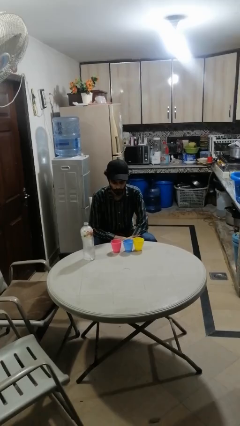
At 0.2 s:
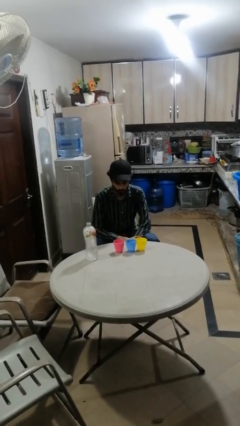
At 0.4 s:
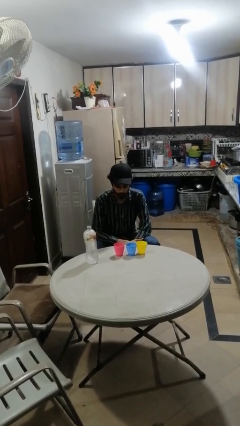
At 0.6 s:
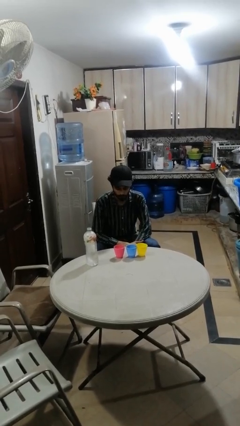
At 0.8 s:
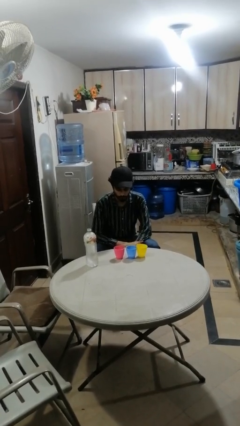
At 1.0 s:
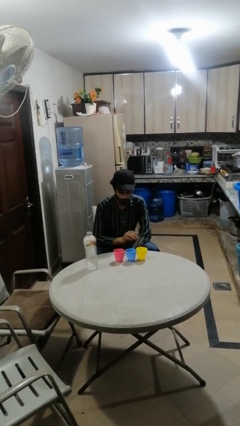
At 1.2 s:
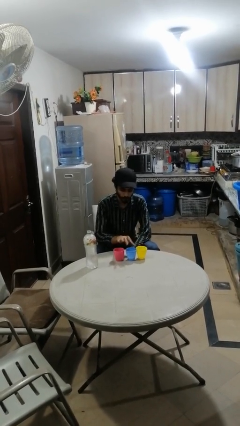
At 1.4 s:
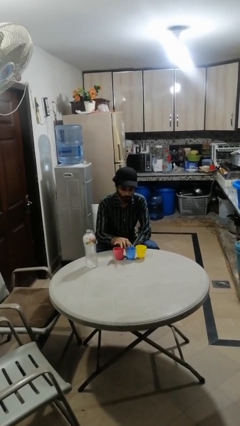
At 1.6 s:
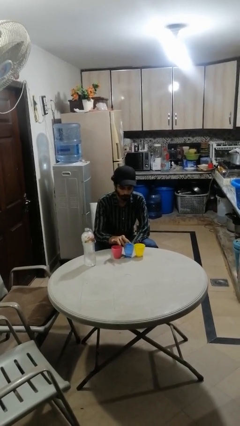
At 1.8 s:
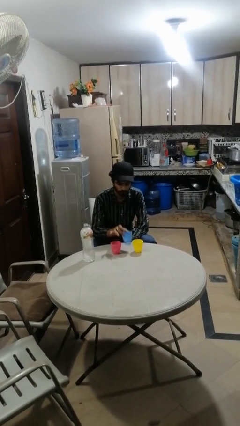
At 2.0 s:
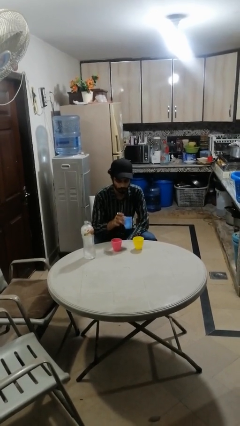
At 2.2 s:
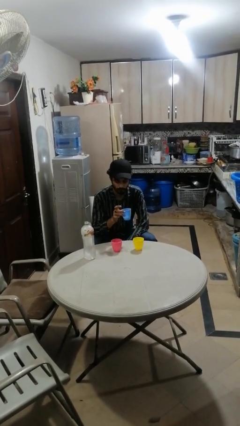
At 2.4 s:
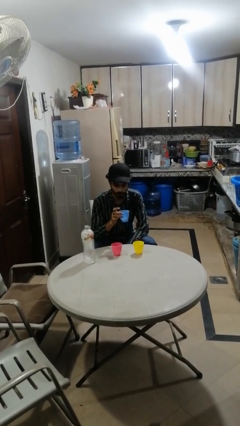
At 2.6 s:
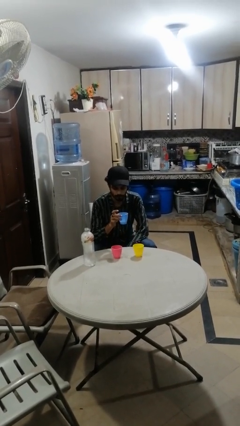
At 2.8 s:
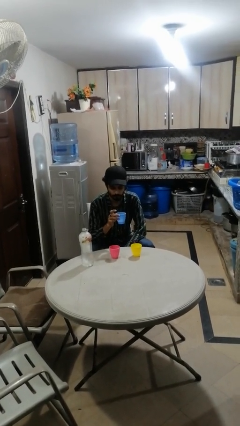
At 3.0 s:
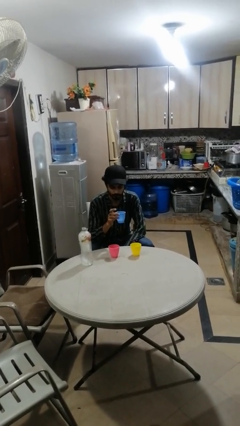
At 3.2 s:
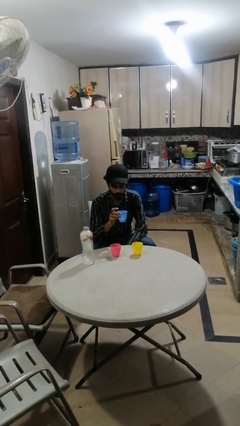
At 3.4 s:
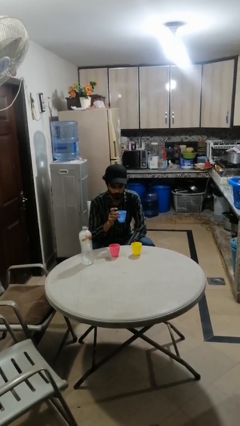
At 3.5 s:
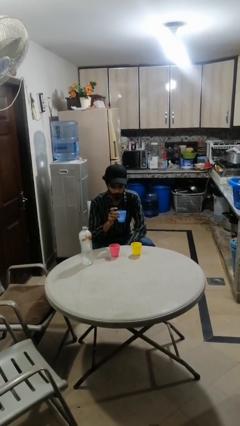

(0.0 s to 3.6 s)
person picks up object from table

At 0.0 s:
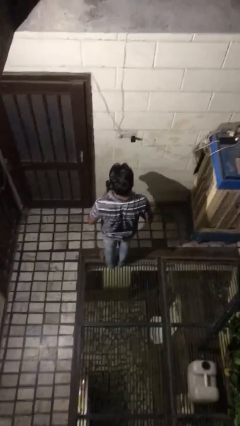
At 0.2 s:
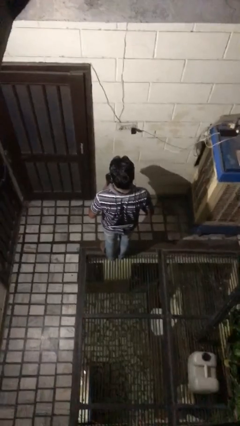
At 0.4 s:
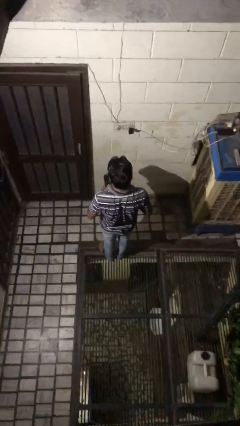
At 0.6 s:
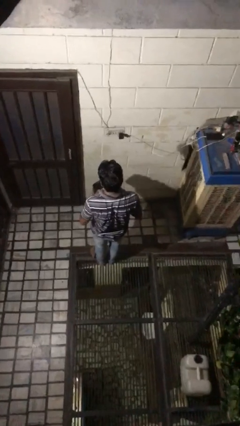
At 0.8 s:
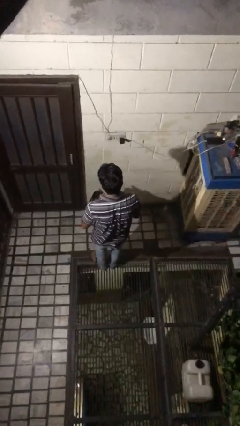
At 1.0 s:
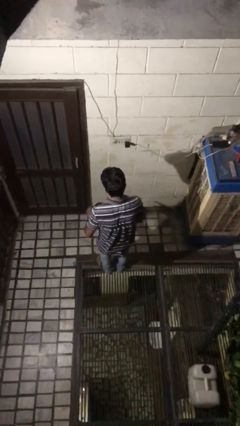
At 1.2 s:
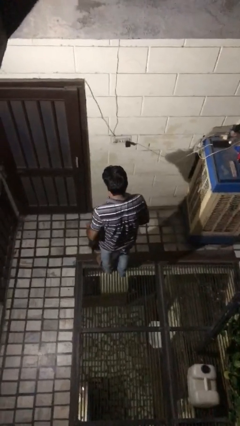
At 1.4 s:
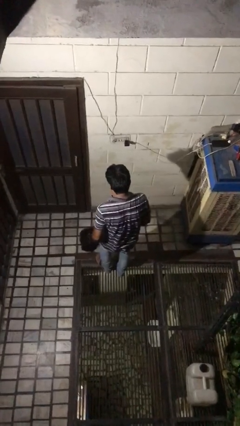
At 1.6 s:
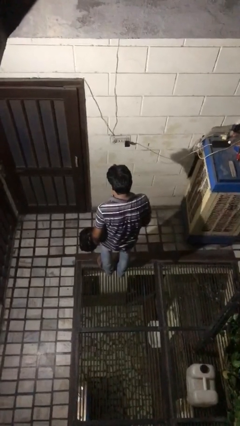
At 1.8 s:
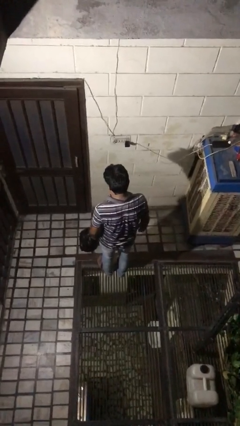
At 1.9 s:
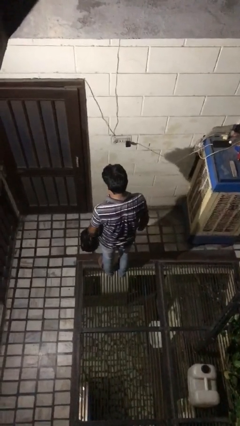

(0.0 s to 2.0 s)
person throws object to ground

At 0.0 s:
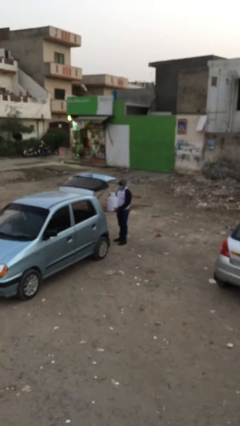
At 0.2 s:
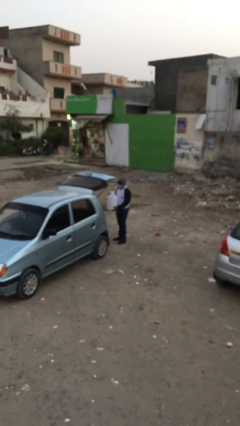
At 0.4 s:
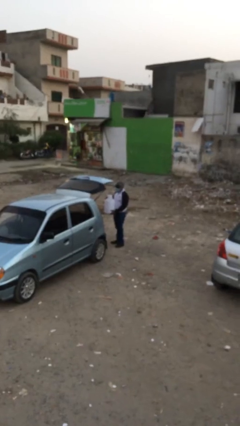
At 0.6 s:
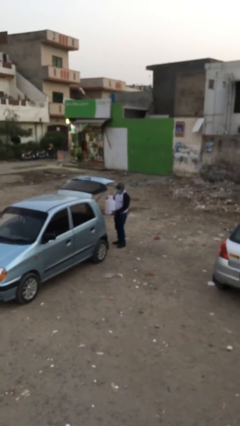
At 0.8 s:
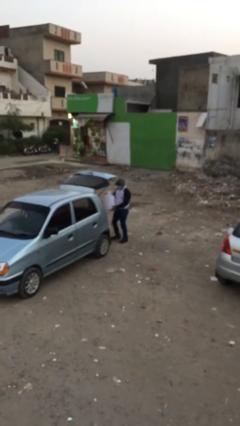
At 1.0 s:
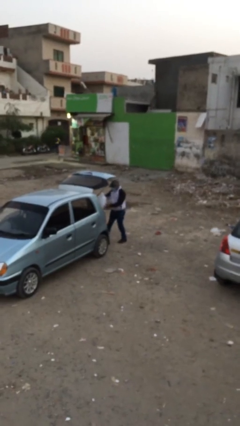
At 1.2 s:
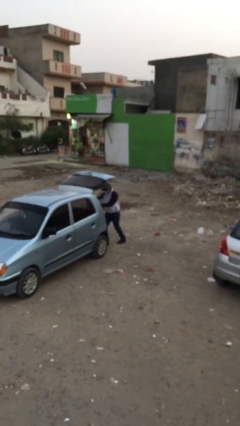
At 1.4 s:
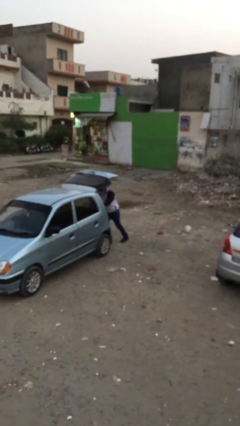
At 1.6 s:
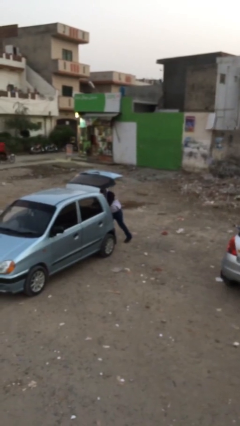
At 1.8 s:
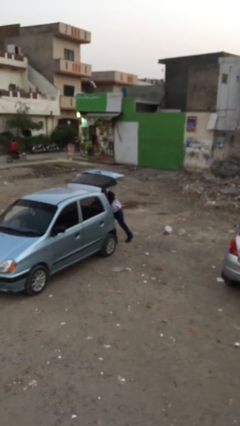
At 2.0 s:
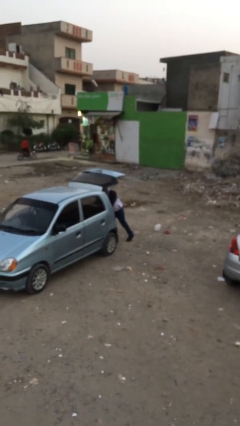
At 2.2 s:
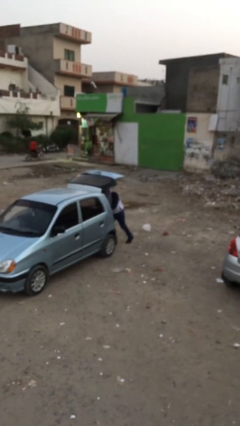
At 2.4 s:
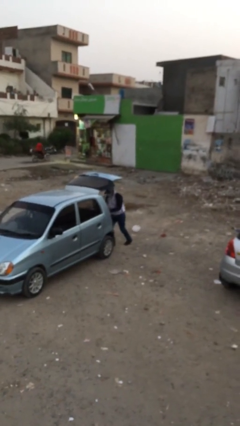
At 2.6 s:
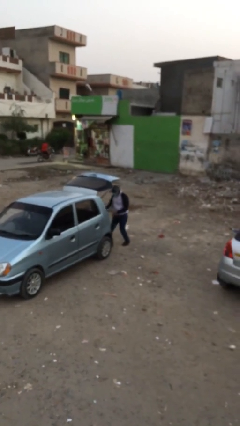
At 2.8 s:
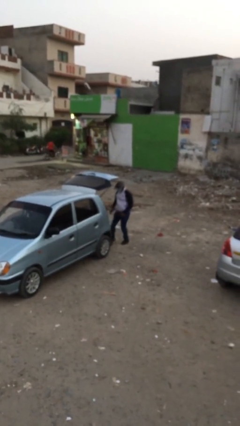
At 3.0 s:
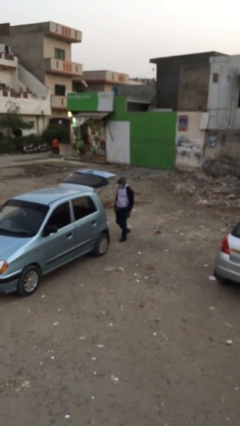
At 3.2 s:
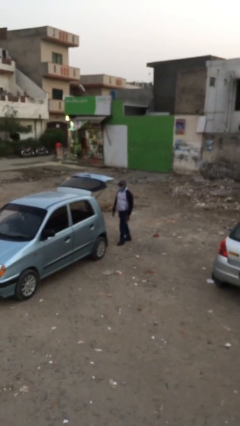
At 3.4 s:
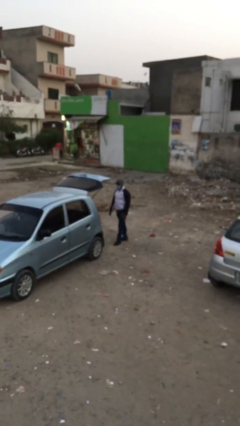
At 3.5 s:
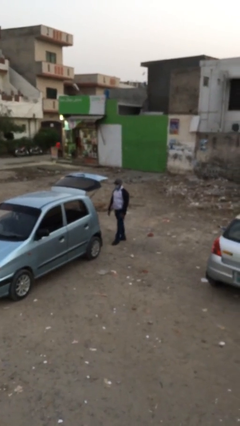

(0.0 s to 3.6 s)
person loads car

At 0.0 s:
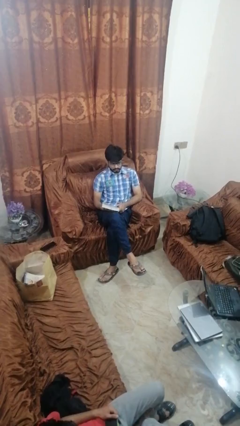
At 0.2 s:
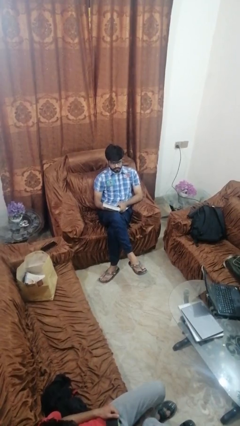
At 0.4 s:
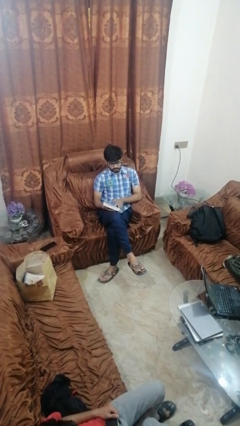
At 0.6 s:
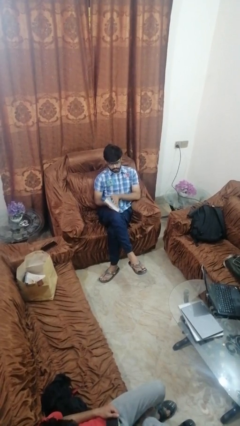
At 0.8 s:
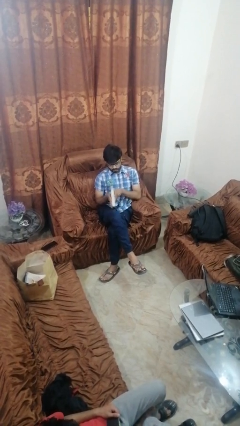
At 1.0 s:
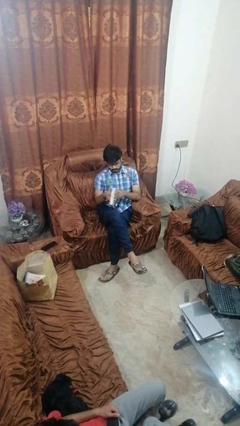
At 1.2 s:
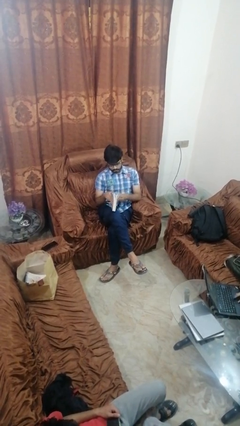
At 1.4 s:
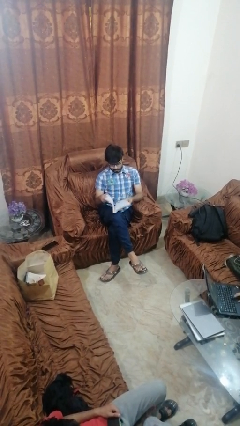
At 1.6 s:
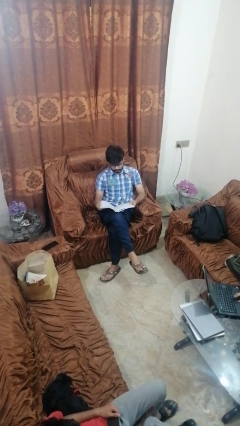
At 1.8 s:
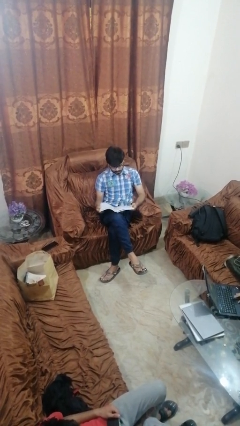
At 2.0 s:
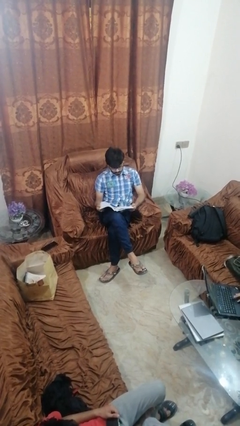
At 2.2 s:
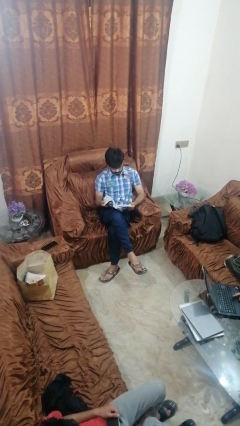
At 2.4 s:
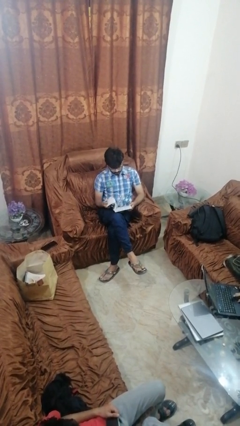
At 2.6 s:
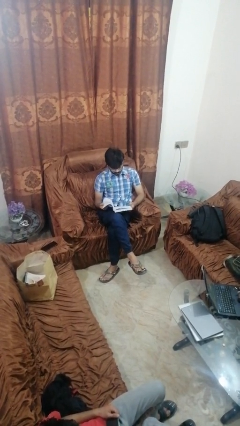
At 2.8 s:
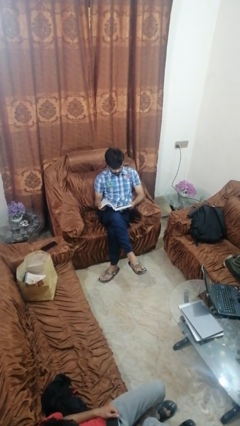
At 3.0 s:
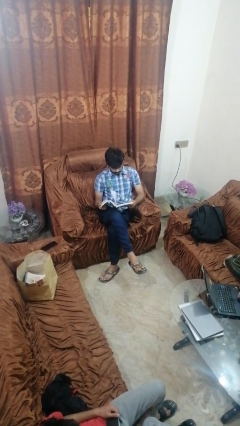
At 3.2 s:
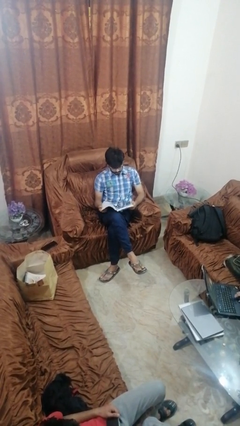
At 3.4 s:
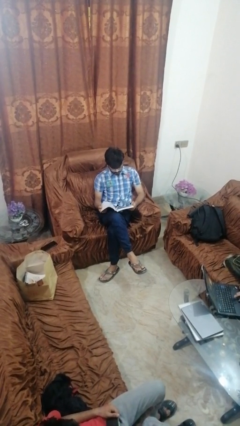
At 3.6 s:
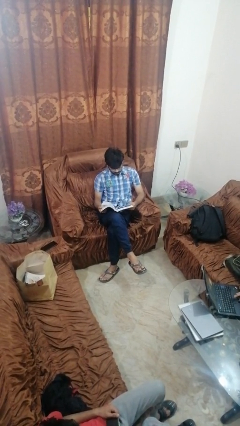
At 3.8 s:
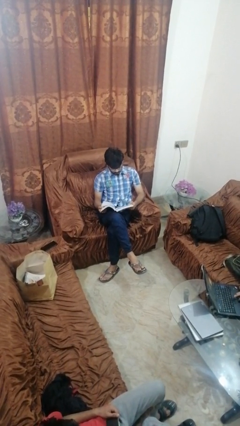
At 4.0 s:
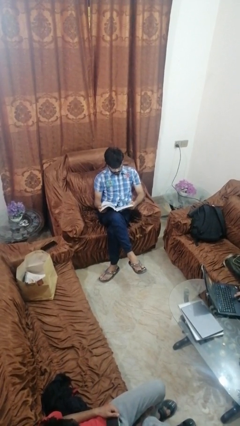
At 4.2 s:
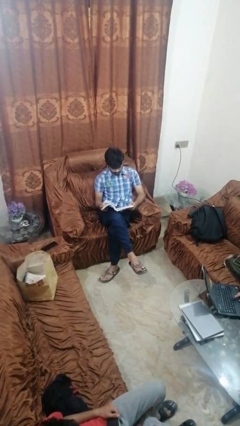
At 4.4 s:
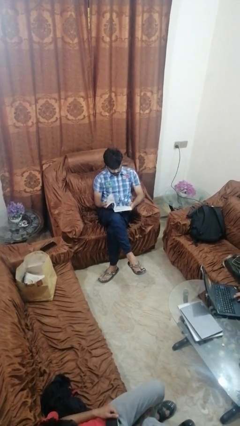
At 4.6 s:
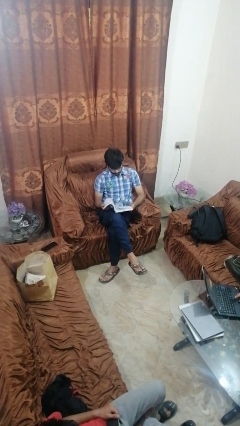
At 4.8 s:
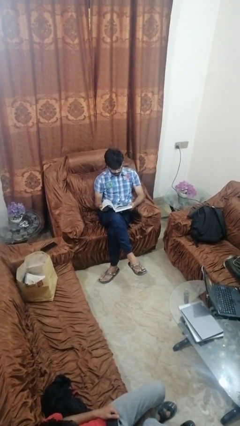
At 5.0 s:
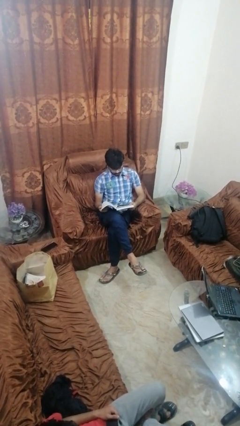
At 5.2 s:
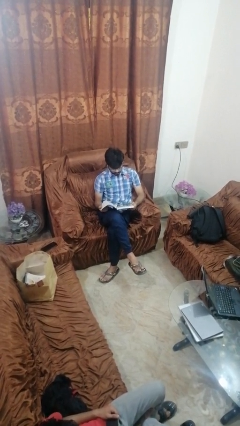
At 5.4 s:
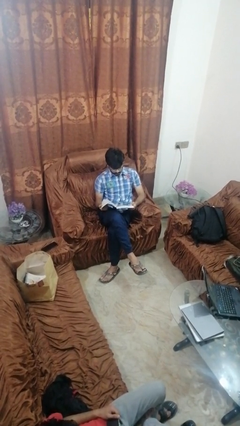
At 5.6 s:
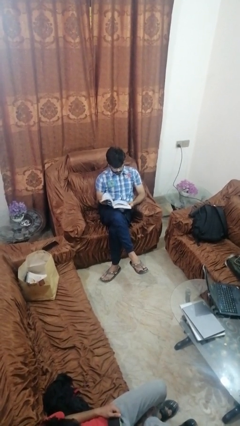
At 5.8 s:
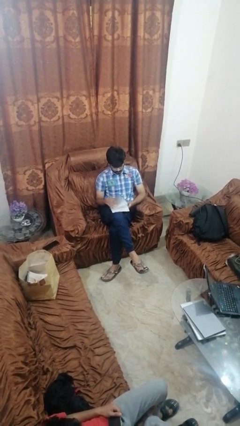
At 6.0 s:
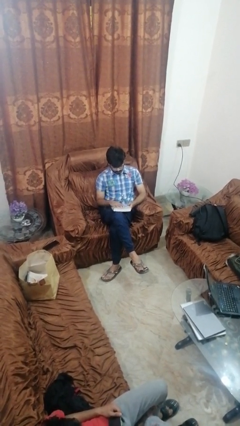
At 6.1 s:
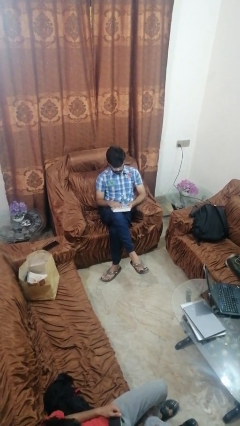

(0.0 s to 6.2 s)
person reads book

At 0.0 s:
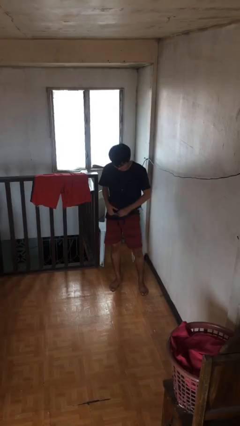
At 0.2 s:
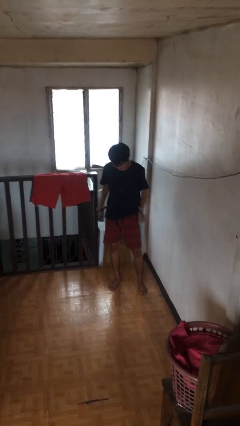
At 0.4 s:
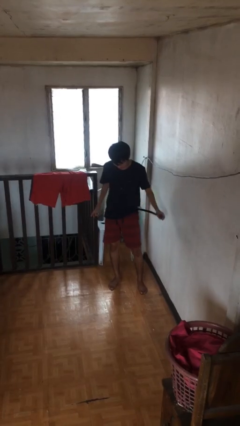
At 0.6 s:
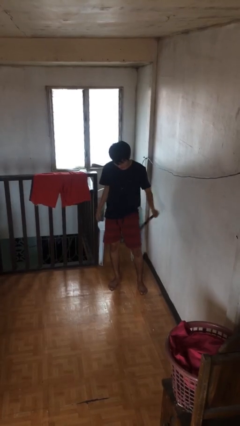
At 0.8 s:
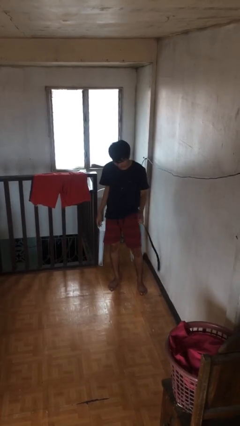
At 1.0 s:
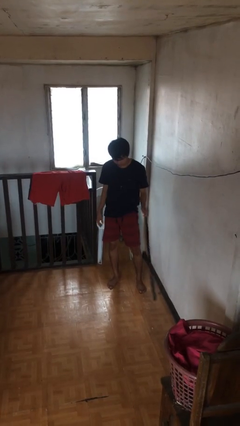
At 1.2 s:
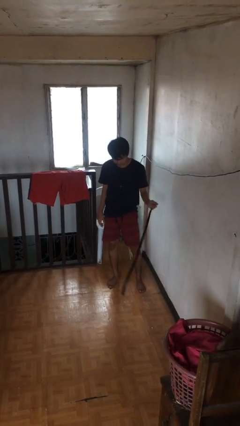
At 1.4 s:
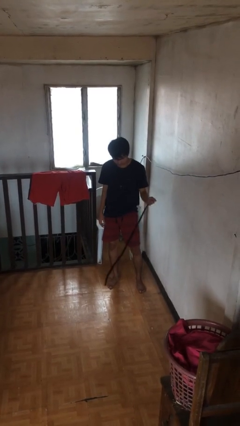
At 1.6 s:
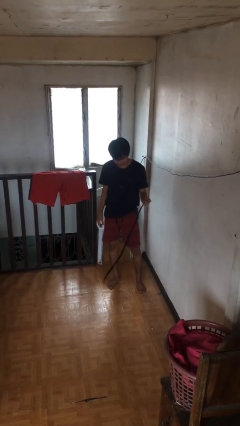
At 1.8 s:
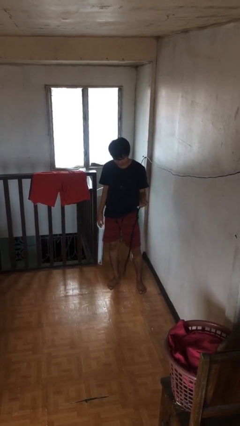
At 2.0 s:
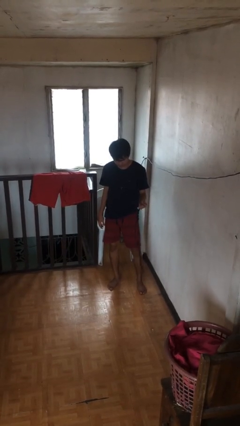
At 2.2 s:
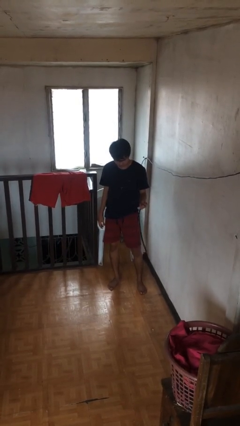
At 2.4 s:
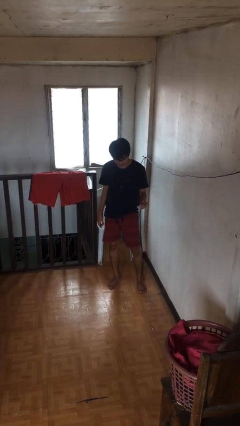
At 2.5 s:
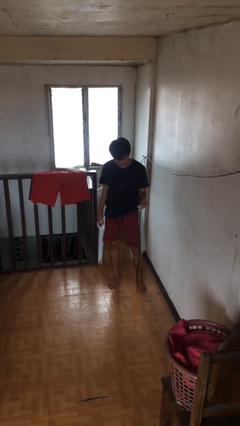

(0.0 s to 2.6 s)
person takes off belt
